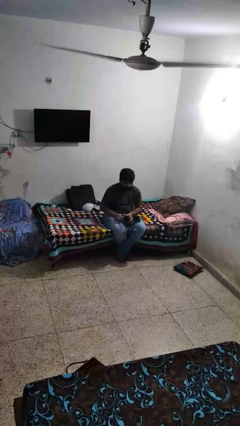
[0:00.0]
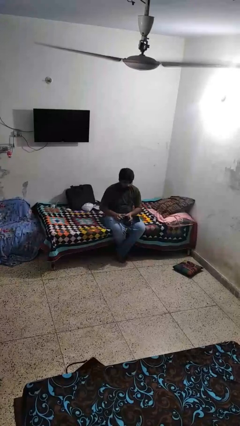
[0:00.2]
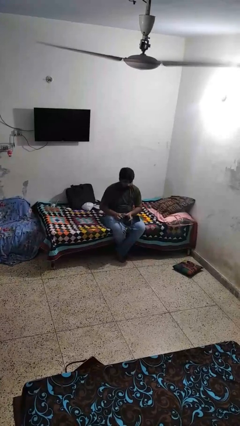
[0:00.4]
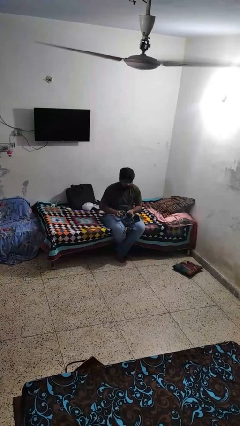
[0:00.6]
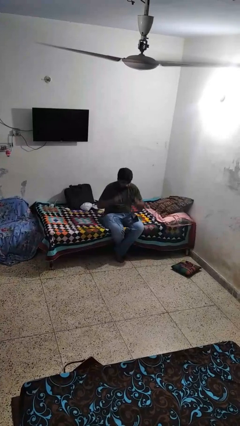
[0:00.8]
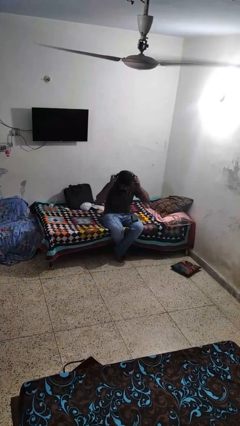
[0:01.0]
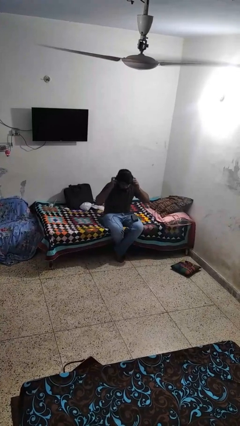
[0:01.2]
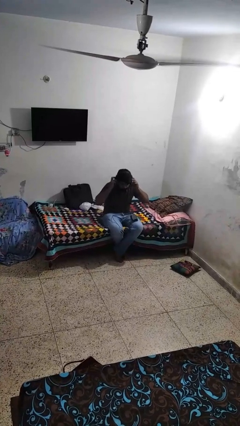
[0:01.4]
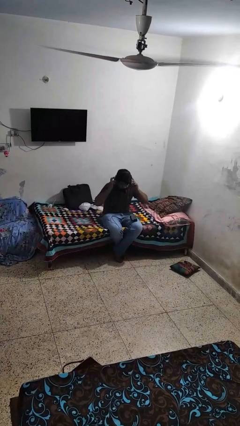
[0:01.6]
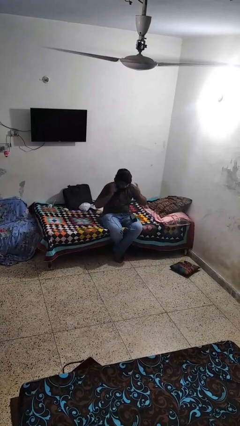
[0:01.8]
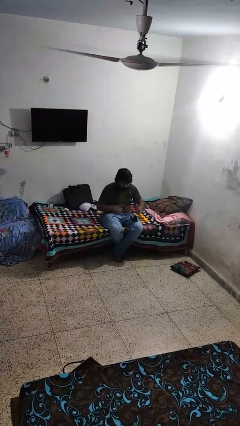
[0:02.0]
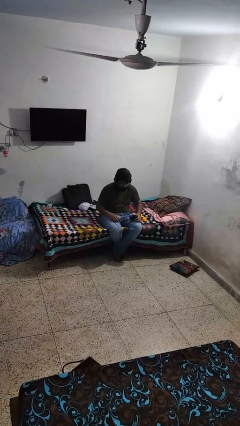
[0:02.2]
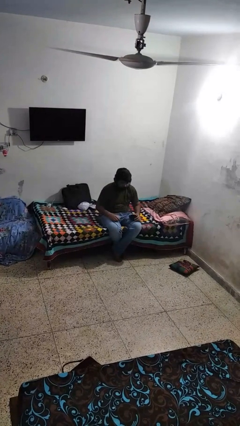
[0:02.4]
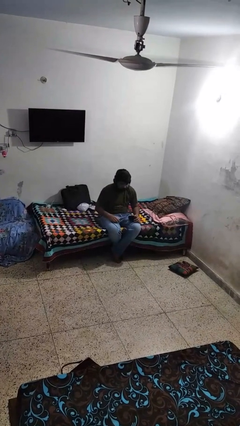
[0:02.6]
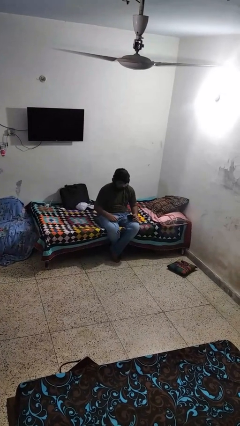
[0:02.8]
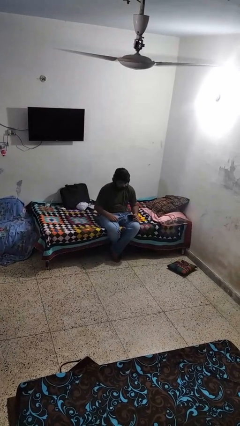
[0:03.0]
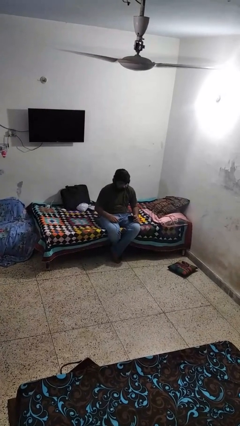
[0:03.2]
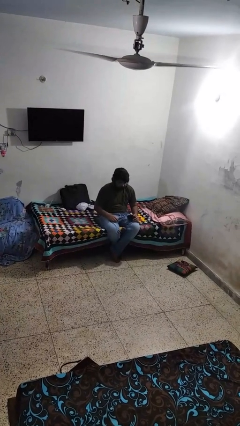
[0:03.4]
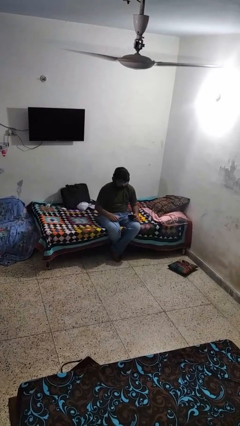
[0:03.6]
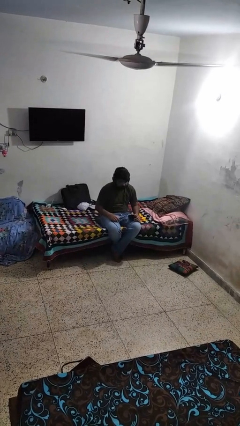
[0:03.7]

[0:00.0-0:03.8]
person puts on headphones

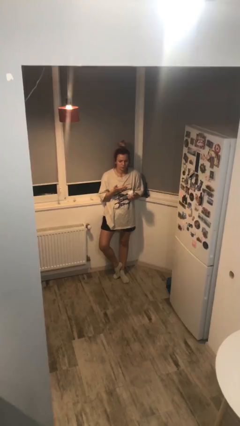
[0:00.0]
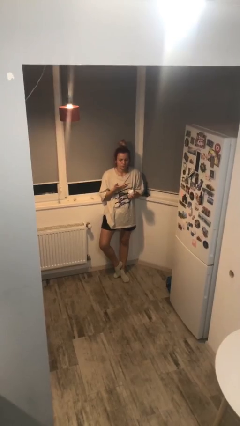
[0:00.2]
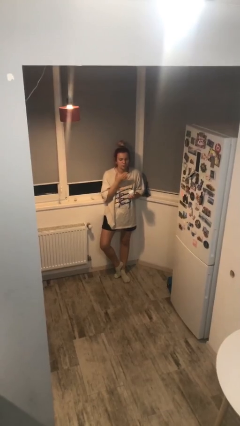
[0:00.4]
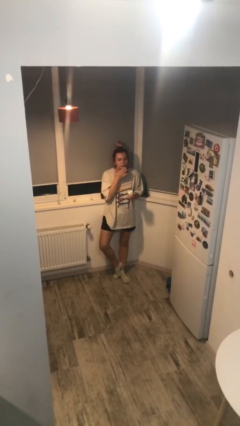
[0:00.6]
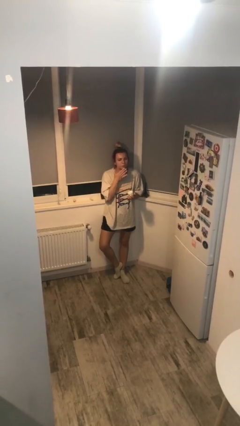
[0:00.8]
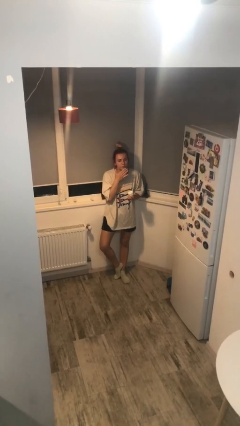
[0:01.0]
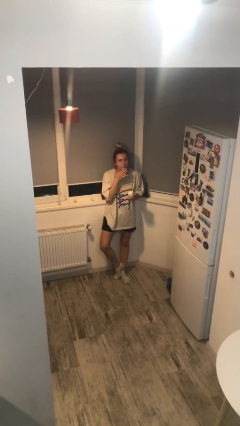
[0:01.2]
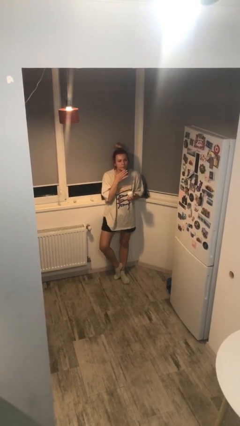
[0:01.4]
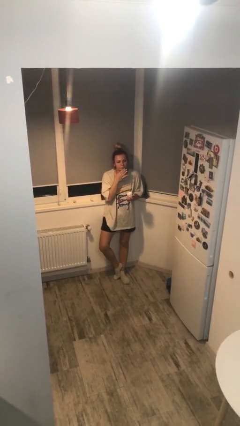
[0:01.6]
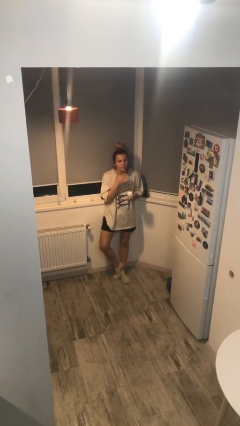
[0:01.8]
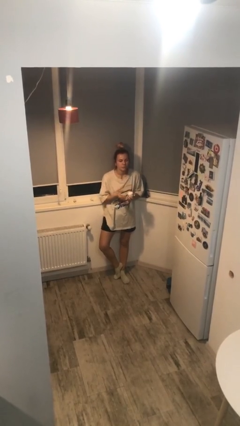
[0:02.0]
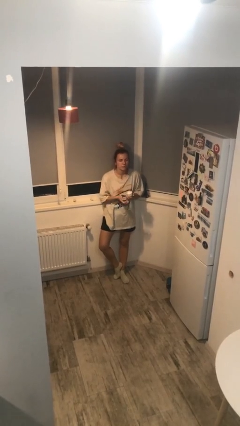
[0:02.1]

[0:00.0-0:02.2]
person applies facial moisturizer

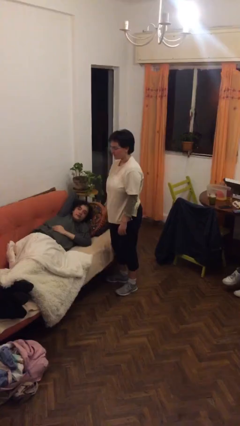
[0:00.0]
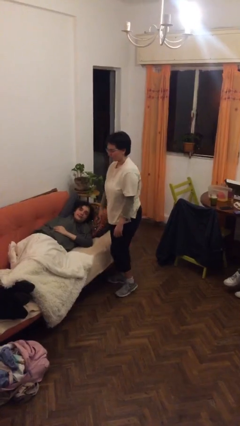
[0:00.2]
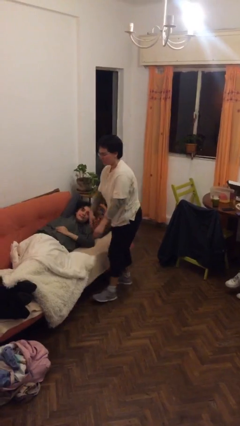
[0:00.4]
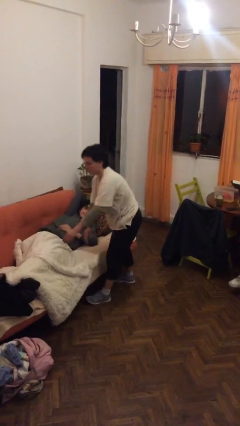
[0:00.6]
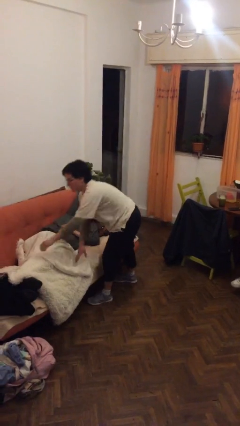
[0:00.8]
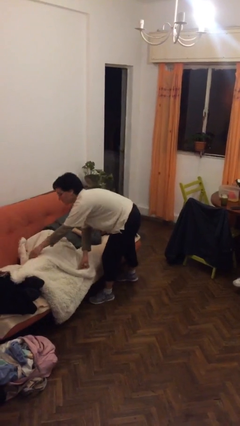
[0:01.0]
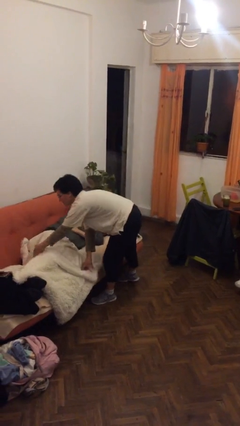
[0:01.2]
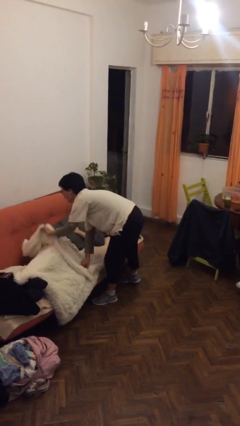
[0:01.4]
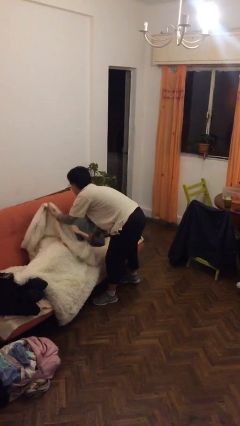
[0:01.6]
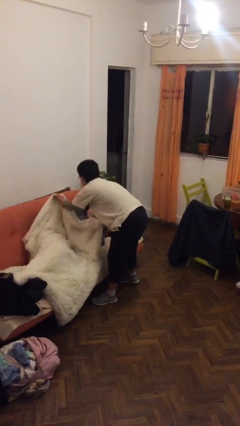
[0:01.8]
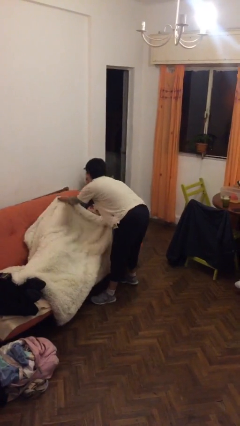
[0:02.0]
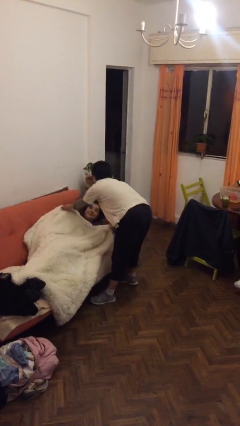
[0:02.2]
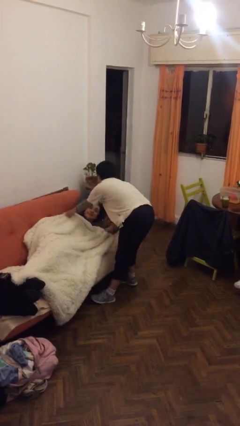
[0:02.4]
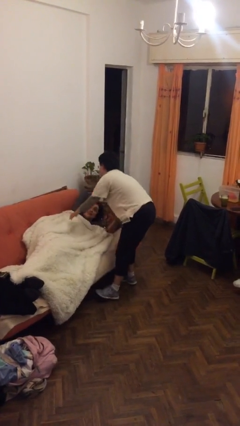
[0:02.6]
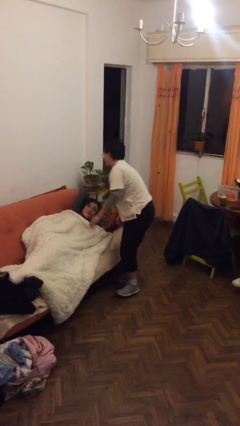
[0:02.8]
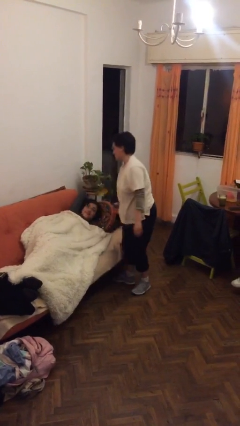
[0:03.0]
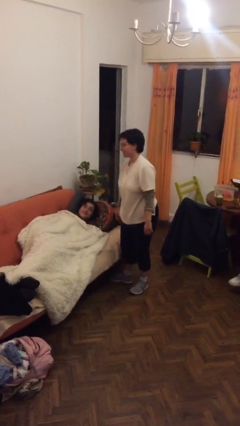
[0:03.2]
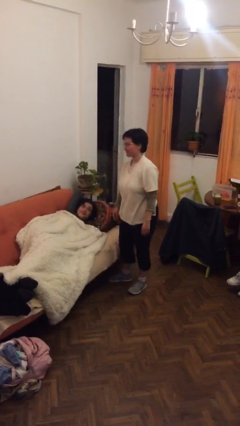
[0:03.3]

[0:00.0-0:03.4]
person covers friend with blanket

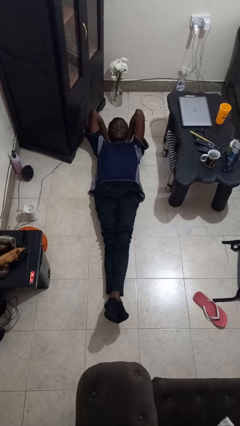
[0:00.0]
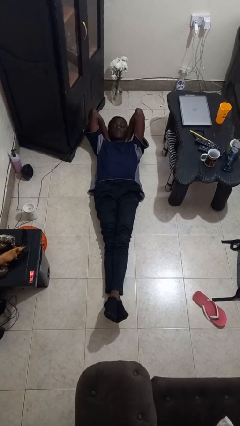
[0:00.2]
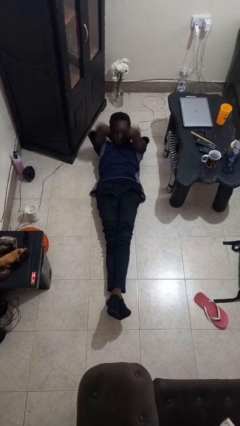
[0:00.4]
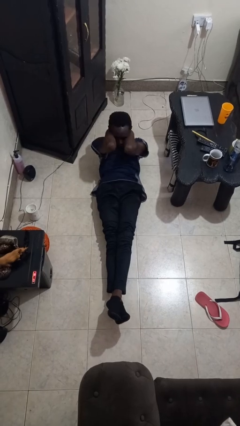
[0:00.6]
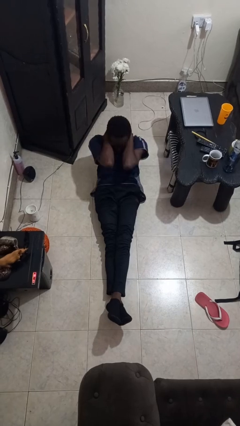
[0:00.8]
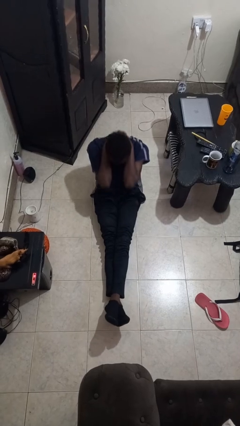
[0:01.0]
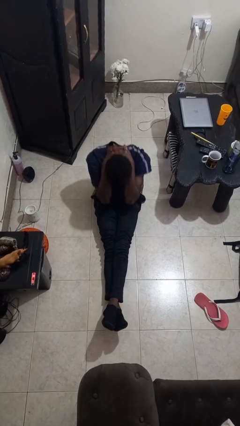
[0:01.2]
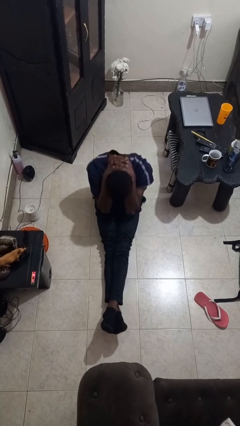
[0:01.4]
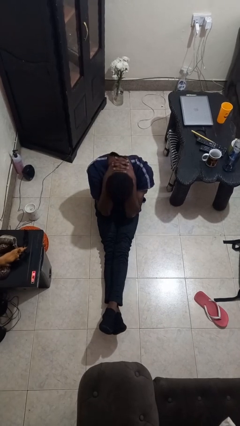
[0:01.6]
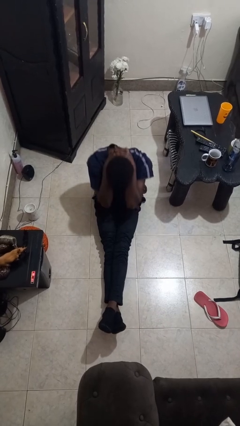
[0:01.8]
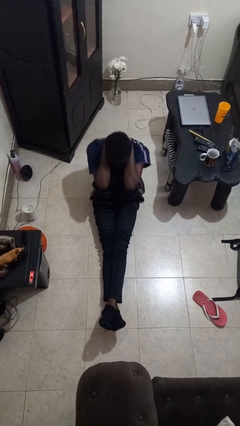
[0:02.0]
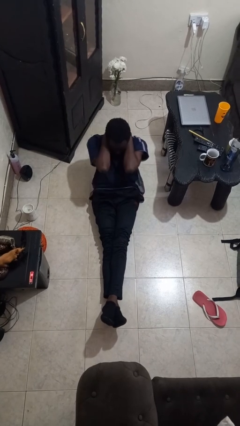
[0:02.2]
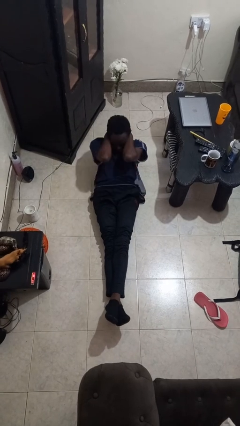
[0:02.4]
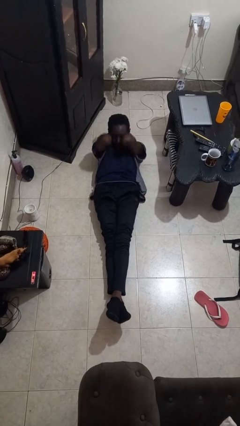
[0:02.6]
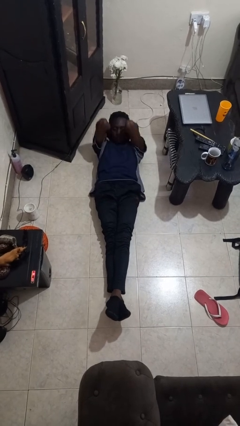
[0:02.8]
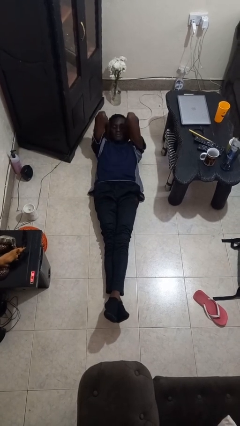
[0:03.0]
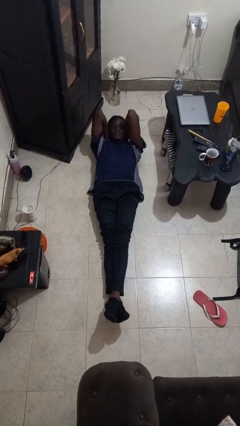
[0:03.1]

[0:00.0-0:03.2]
person exercises with situp

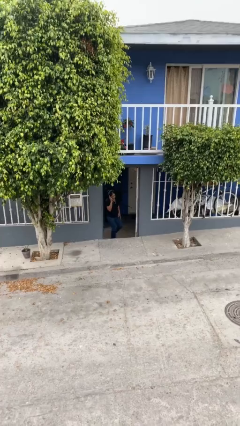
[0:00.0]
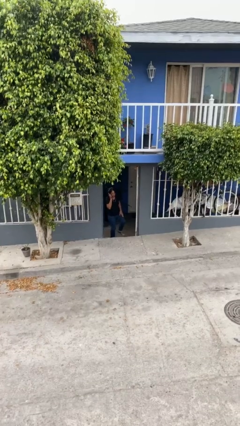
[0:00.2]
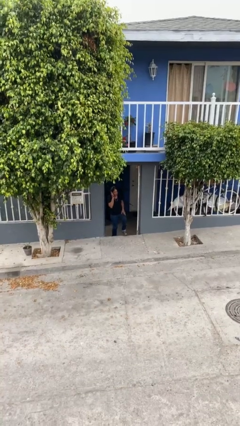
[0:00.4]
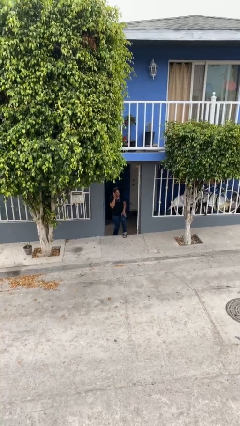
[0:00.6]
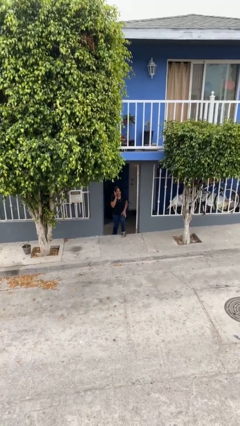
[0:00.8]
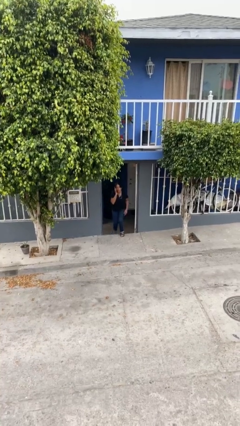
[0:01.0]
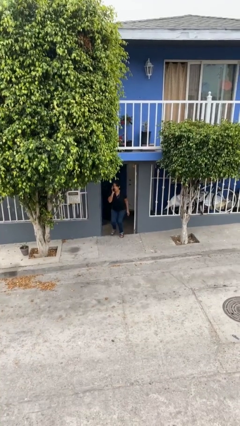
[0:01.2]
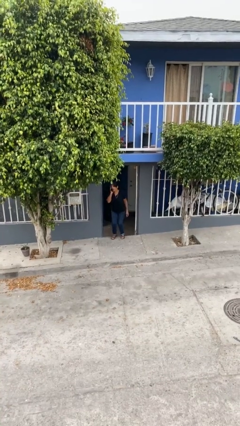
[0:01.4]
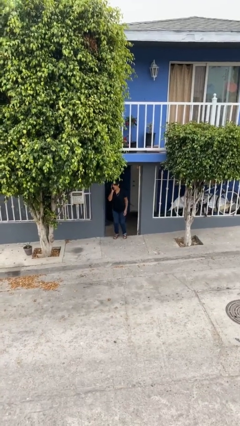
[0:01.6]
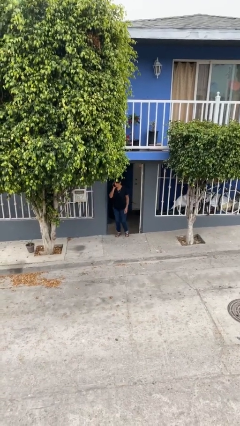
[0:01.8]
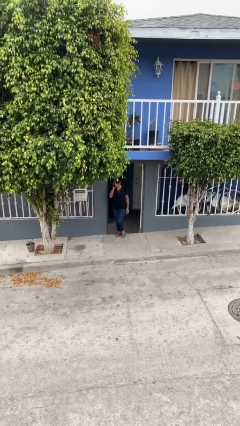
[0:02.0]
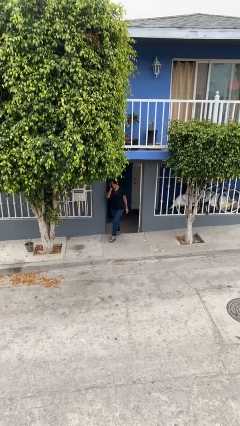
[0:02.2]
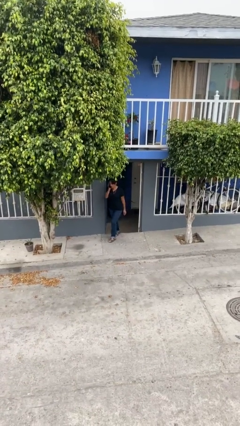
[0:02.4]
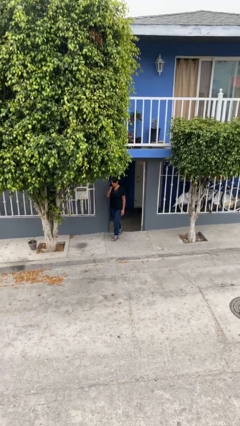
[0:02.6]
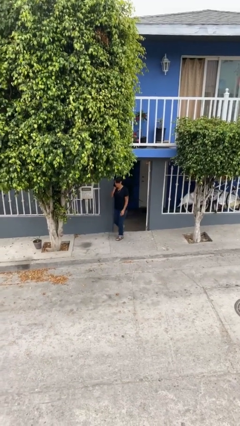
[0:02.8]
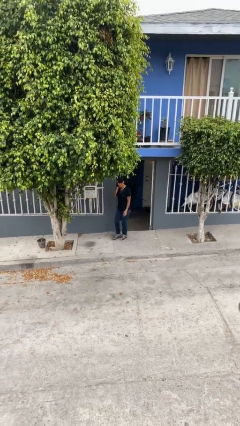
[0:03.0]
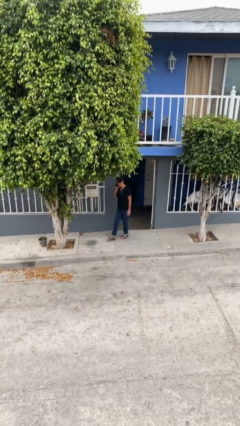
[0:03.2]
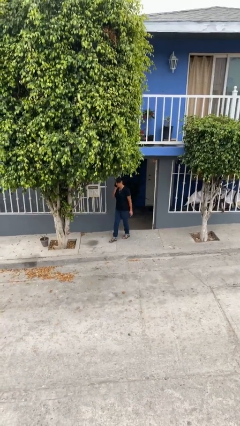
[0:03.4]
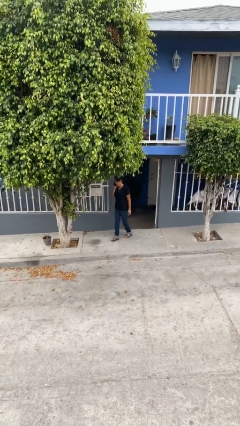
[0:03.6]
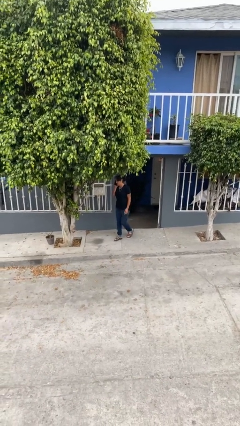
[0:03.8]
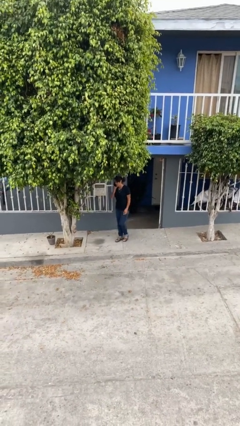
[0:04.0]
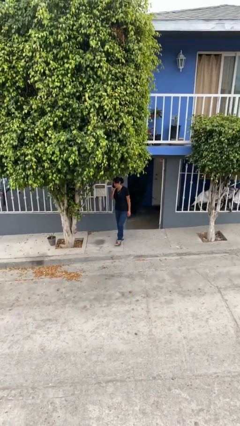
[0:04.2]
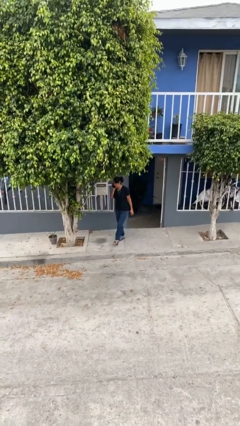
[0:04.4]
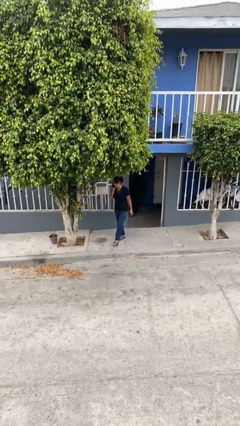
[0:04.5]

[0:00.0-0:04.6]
person enters scene through structure

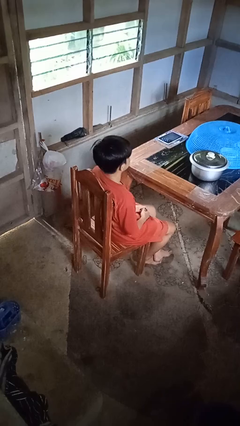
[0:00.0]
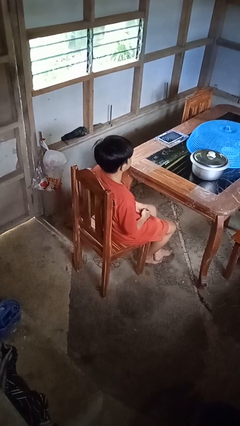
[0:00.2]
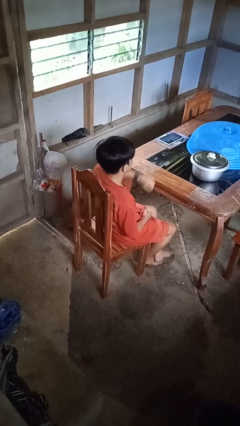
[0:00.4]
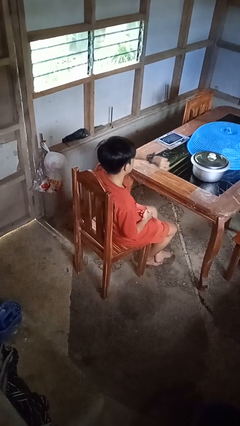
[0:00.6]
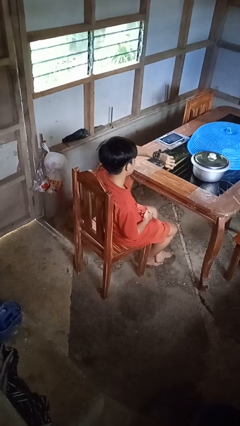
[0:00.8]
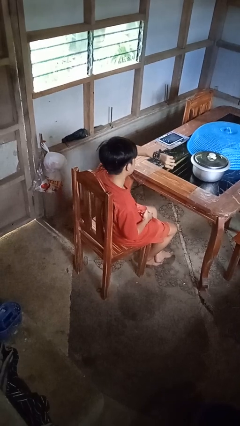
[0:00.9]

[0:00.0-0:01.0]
person looks at wristwatch
